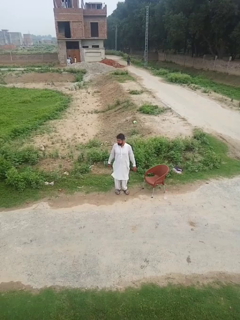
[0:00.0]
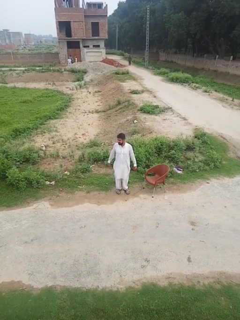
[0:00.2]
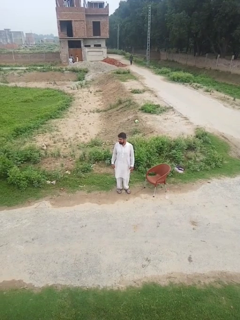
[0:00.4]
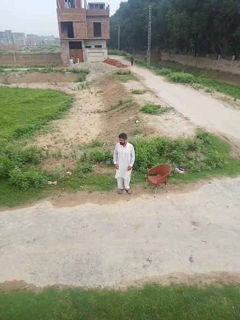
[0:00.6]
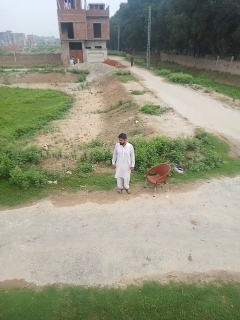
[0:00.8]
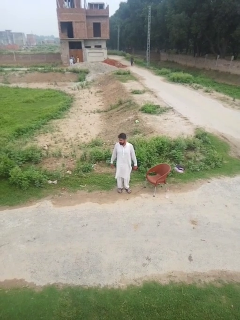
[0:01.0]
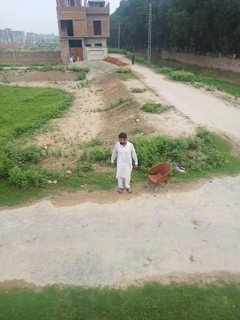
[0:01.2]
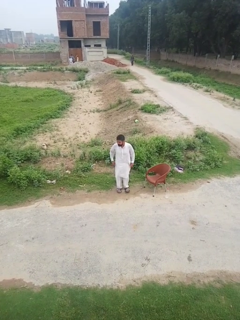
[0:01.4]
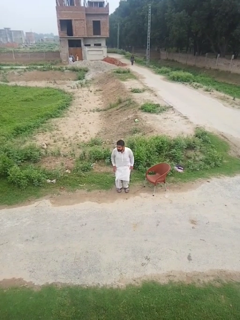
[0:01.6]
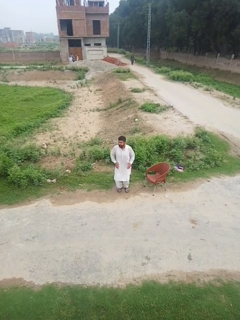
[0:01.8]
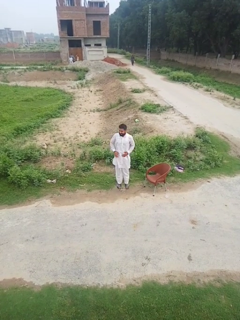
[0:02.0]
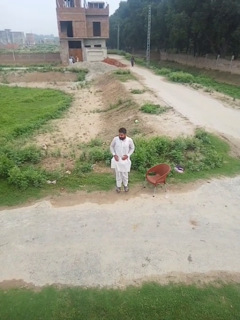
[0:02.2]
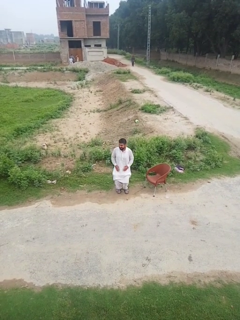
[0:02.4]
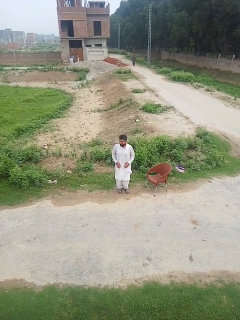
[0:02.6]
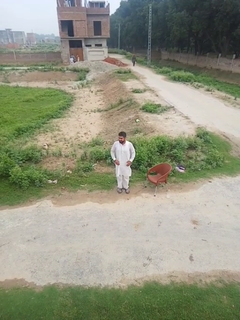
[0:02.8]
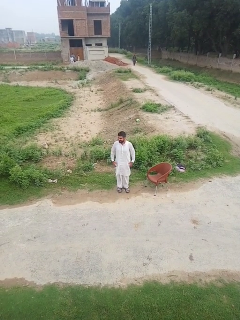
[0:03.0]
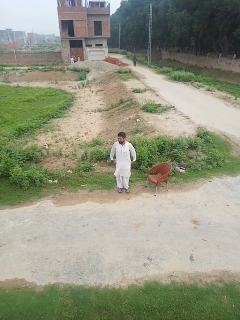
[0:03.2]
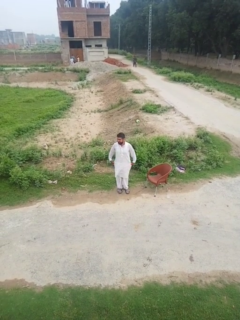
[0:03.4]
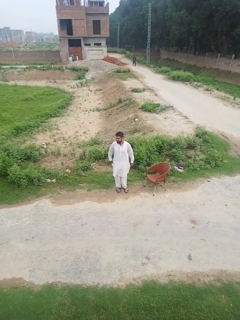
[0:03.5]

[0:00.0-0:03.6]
person jumps

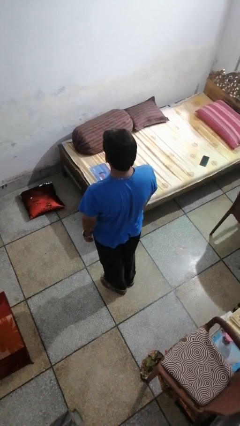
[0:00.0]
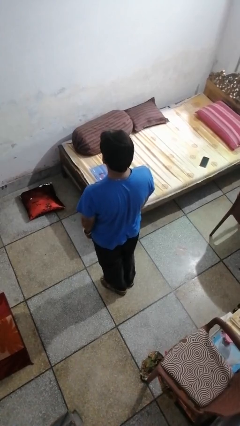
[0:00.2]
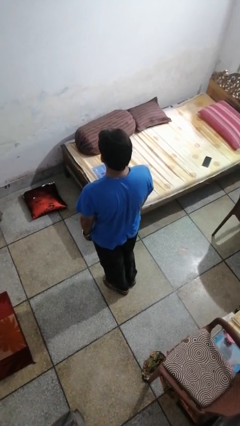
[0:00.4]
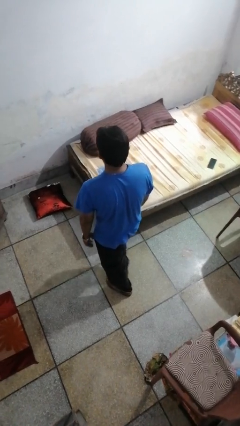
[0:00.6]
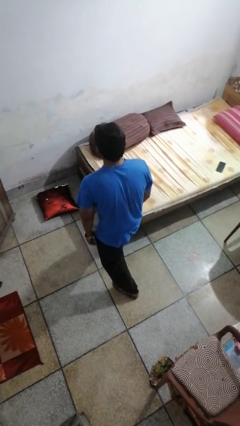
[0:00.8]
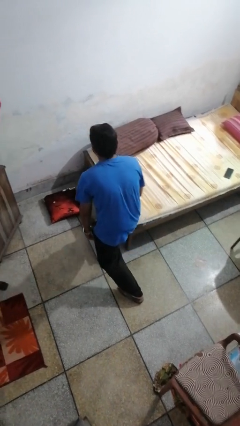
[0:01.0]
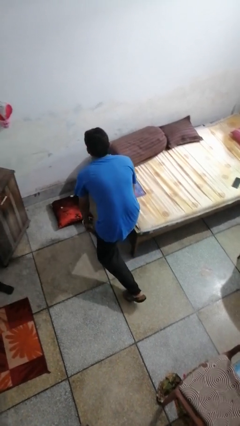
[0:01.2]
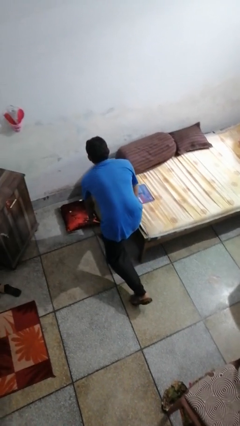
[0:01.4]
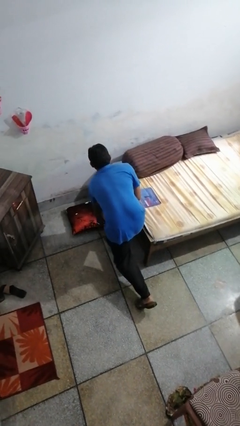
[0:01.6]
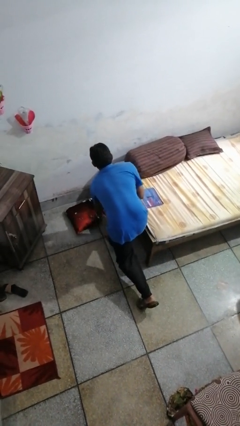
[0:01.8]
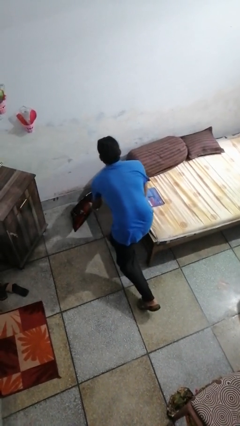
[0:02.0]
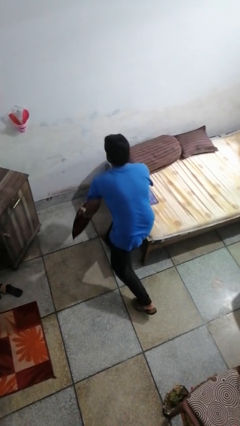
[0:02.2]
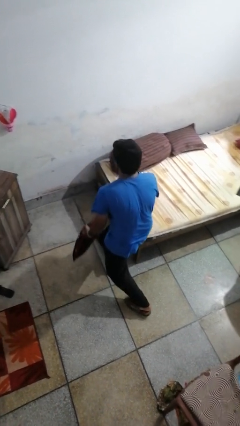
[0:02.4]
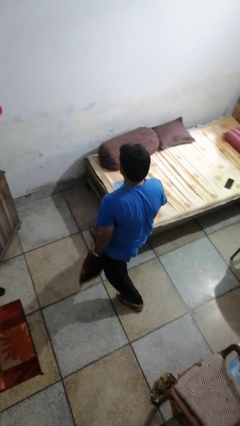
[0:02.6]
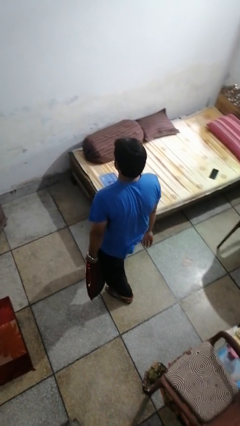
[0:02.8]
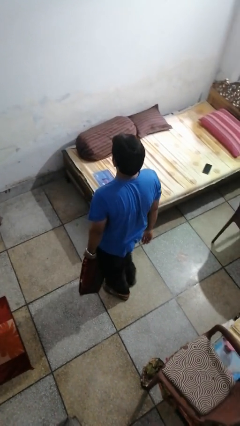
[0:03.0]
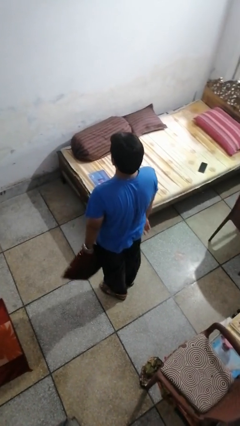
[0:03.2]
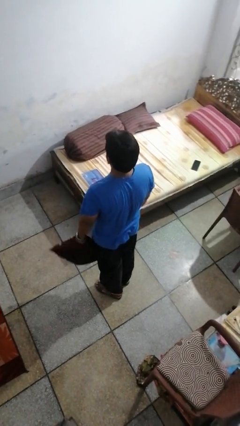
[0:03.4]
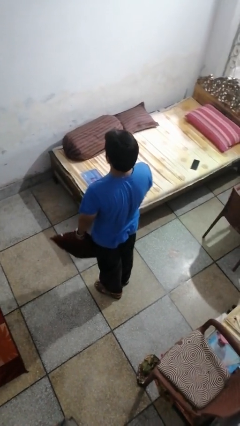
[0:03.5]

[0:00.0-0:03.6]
person picks up object from floor

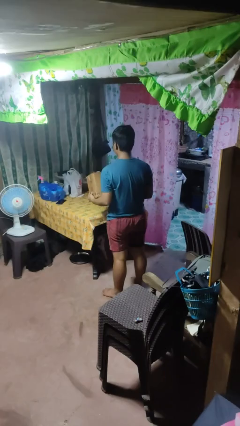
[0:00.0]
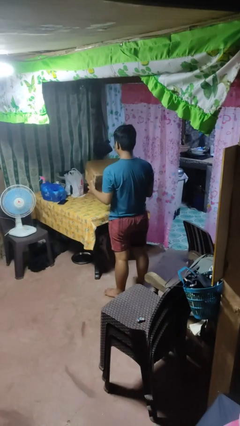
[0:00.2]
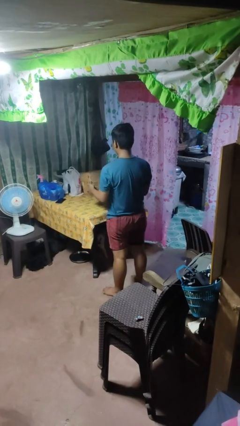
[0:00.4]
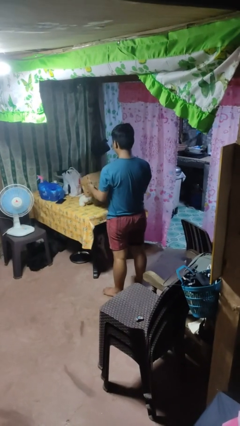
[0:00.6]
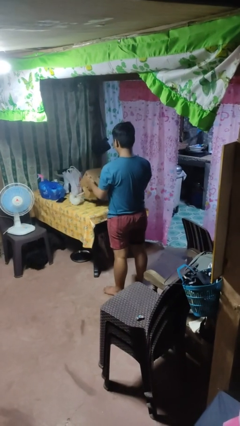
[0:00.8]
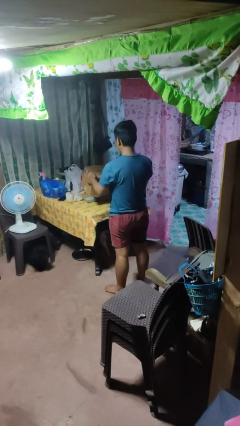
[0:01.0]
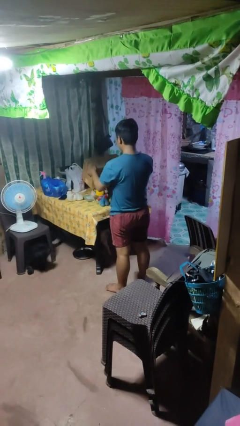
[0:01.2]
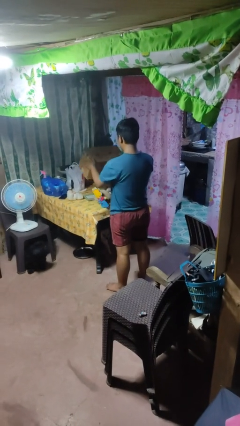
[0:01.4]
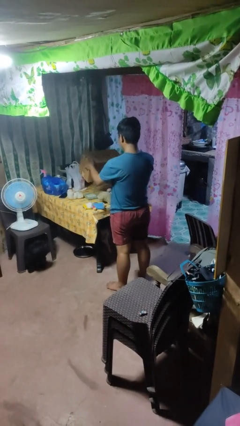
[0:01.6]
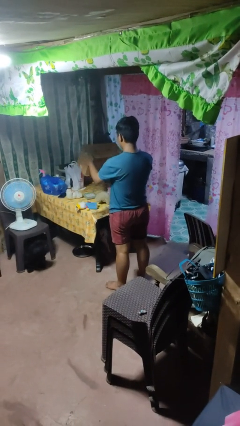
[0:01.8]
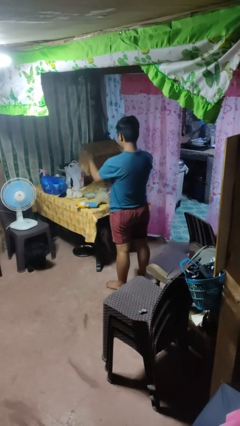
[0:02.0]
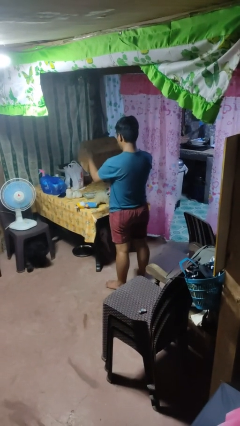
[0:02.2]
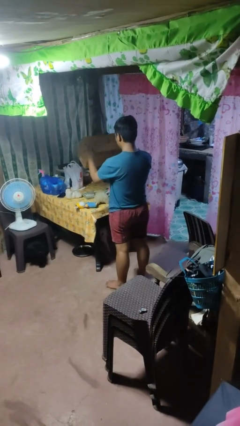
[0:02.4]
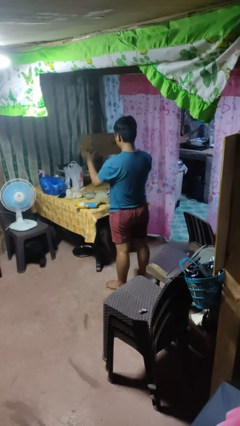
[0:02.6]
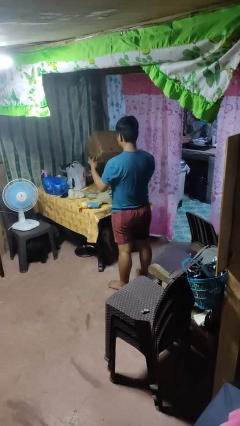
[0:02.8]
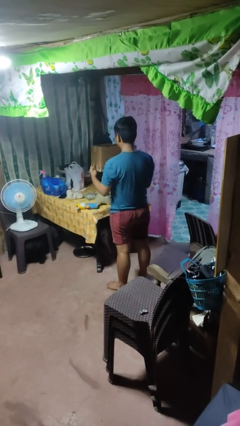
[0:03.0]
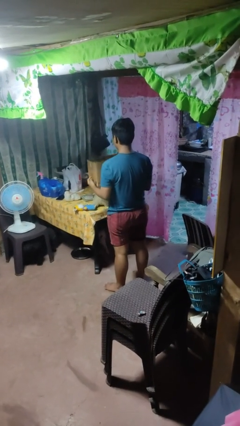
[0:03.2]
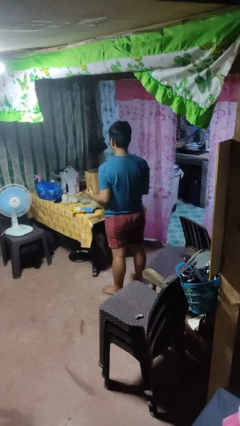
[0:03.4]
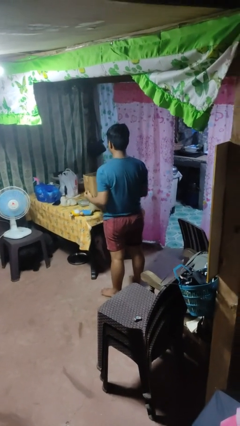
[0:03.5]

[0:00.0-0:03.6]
person unloads box onto table

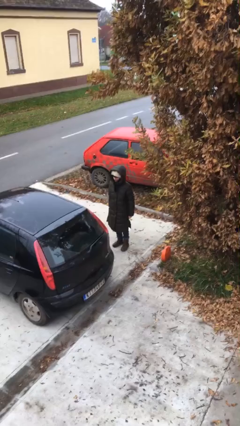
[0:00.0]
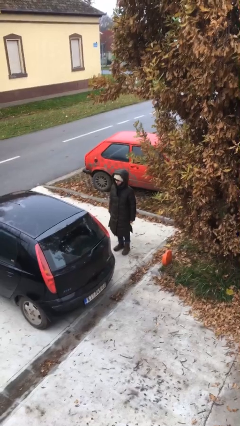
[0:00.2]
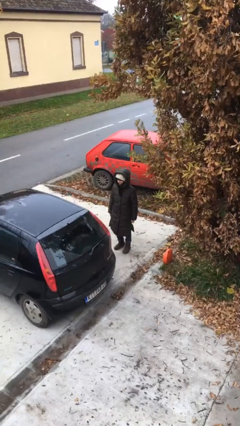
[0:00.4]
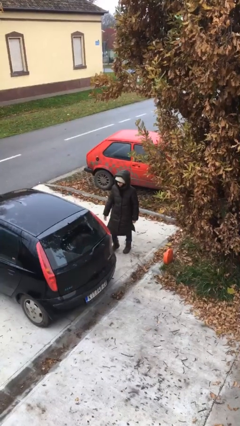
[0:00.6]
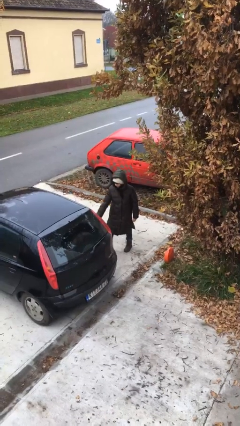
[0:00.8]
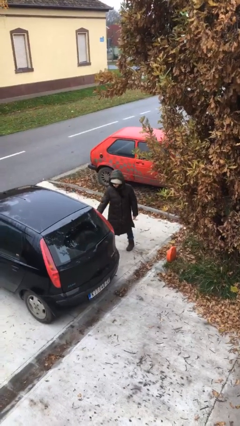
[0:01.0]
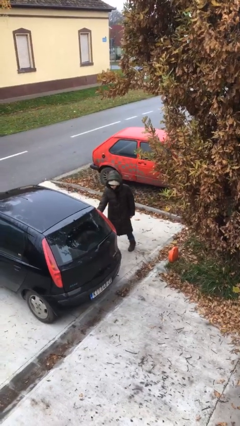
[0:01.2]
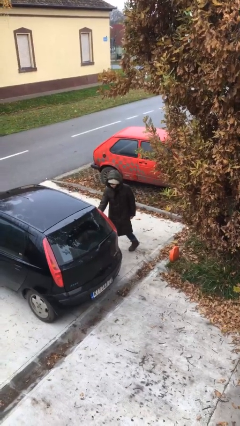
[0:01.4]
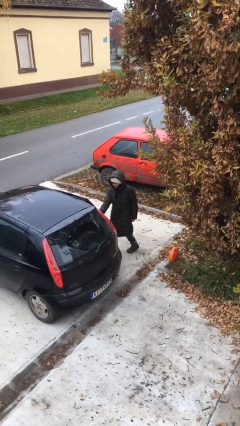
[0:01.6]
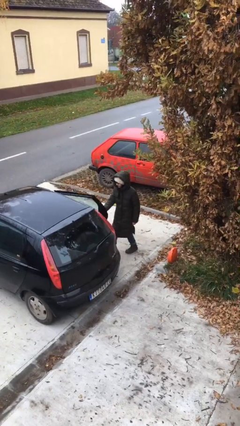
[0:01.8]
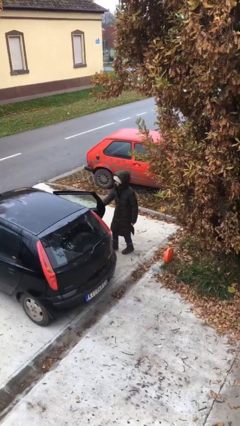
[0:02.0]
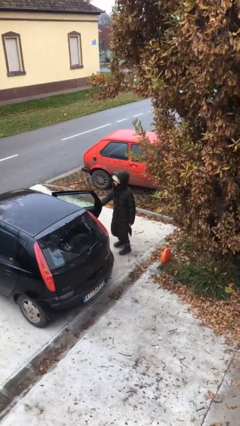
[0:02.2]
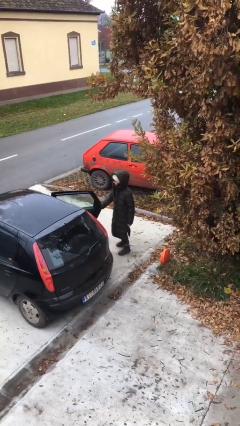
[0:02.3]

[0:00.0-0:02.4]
person opens car door

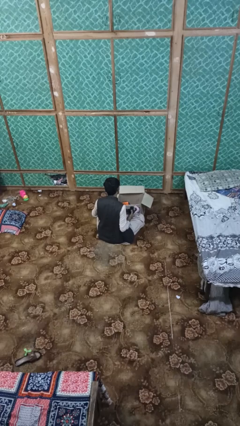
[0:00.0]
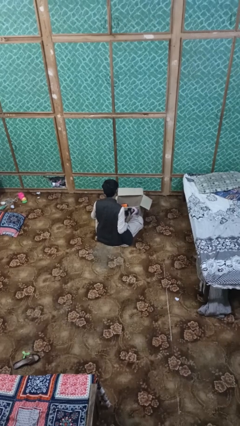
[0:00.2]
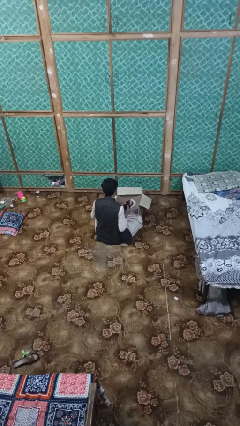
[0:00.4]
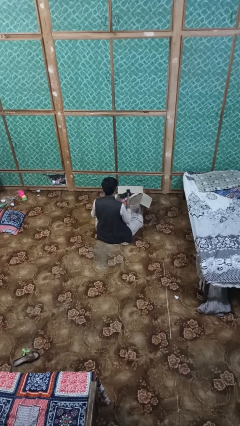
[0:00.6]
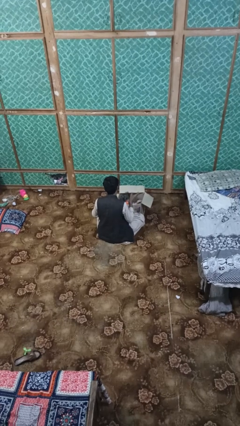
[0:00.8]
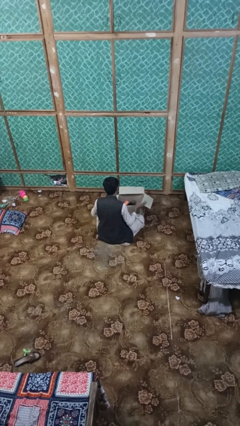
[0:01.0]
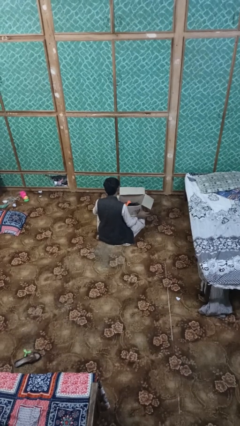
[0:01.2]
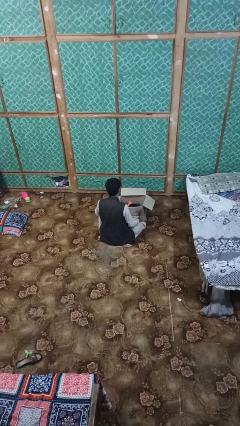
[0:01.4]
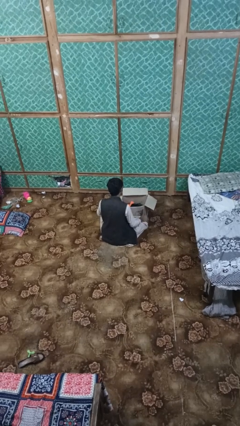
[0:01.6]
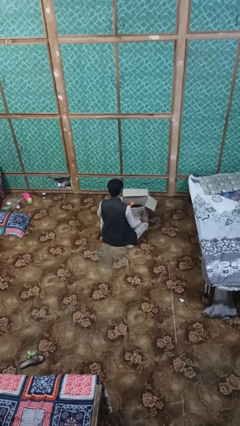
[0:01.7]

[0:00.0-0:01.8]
person puts object into box

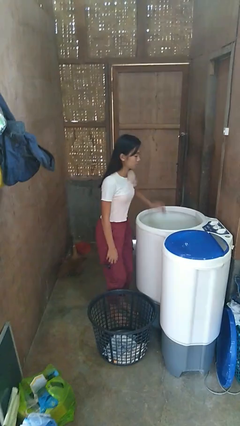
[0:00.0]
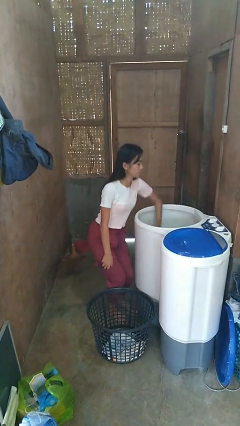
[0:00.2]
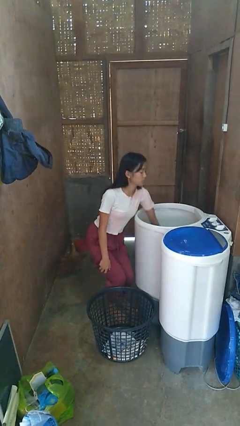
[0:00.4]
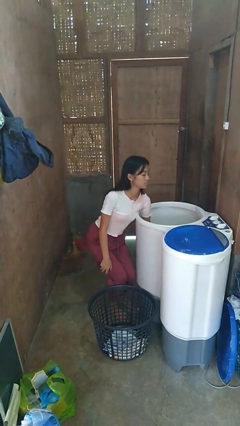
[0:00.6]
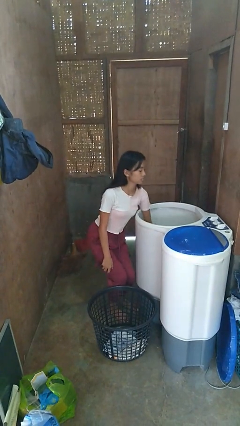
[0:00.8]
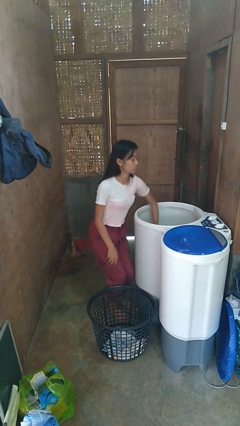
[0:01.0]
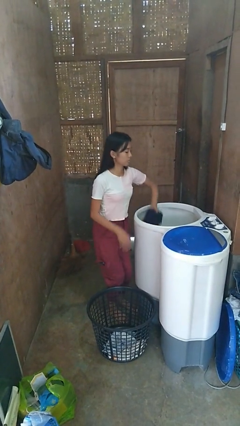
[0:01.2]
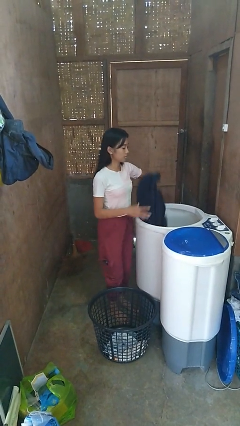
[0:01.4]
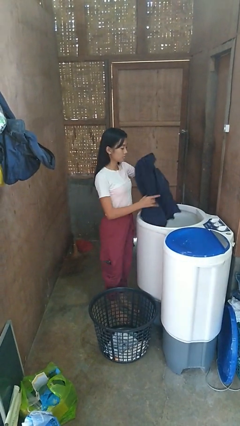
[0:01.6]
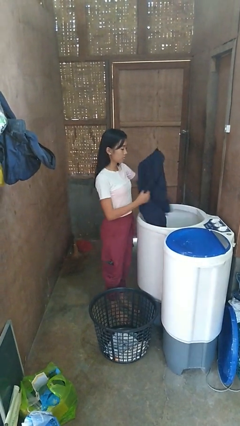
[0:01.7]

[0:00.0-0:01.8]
person unloads clotheswasher

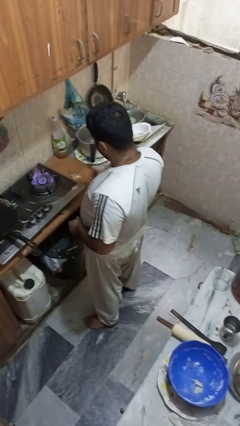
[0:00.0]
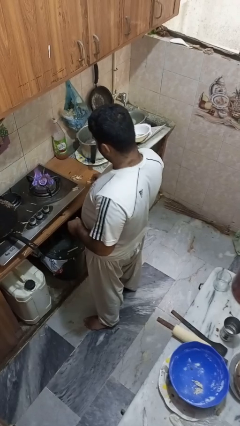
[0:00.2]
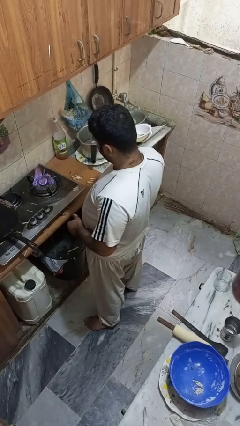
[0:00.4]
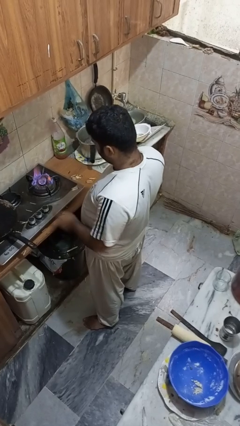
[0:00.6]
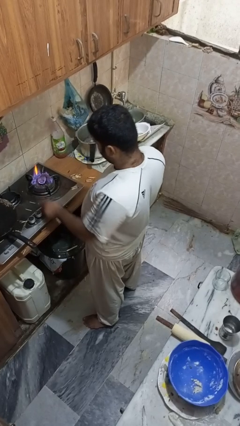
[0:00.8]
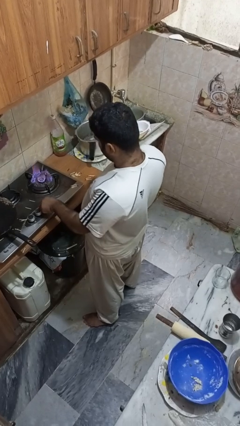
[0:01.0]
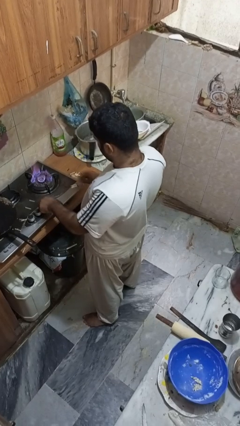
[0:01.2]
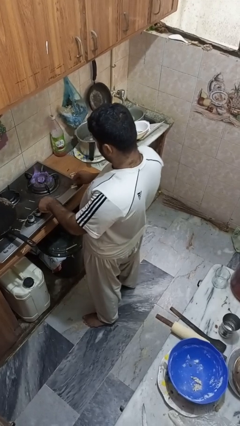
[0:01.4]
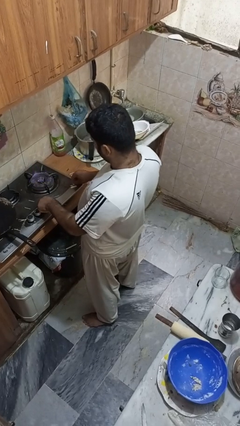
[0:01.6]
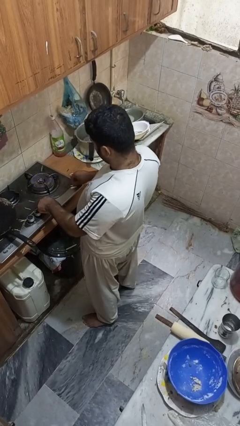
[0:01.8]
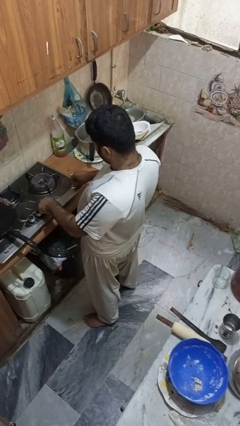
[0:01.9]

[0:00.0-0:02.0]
person turns off stovetop
